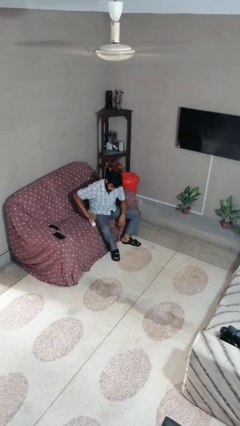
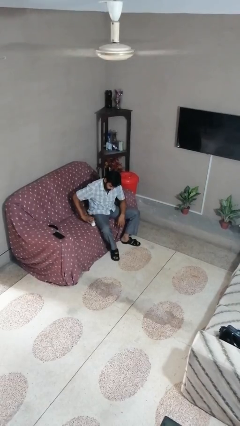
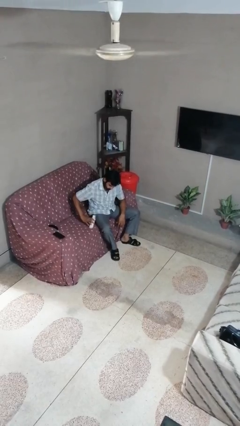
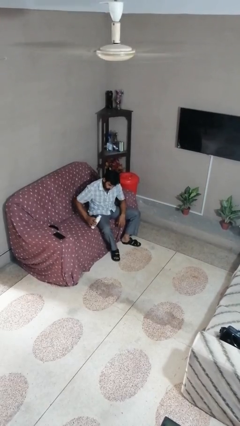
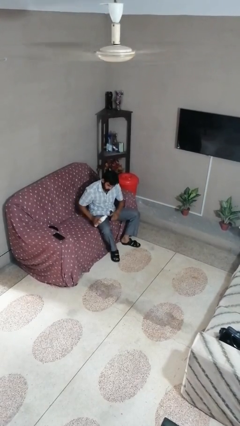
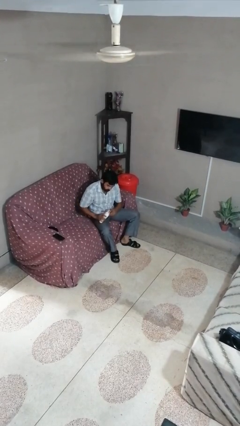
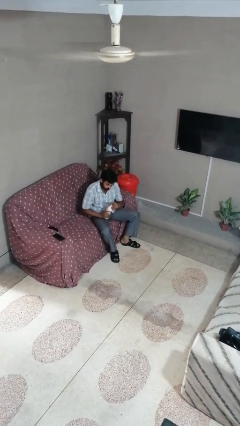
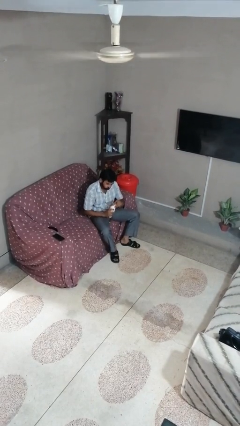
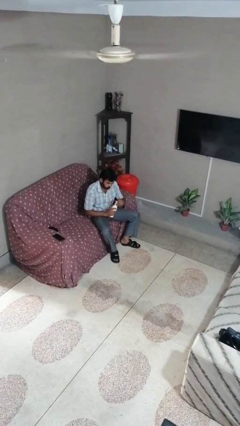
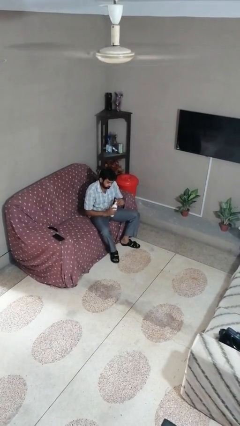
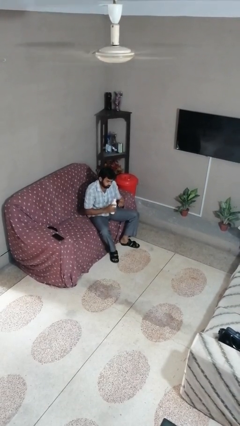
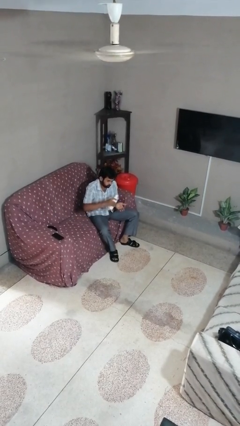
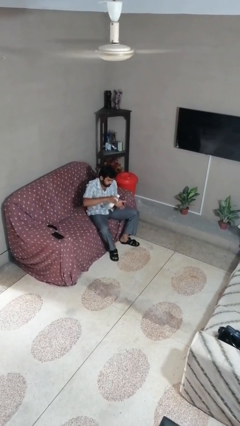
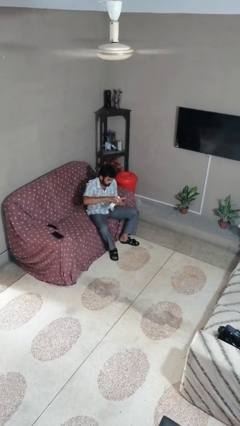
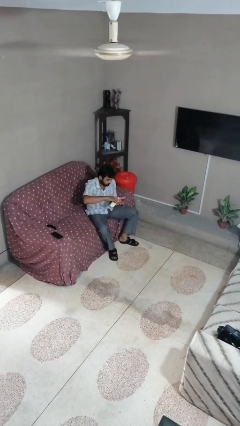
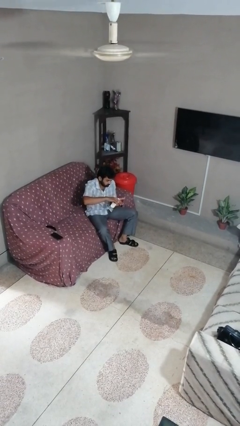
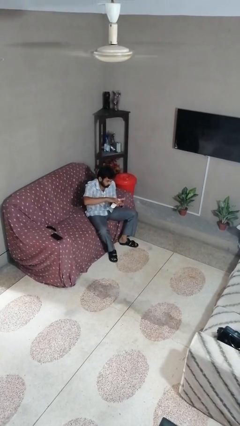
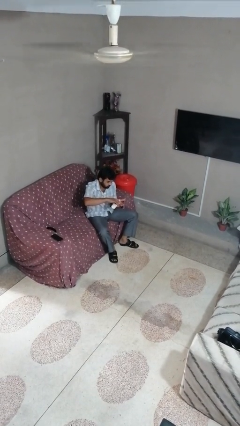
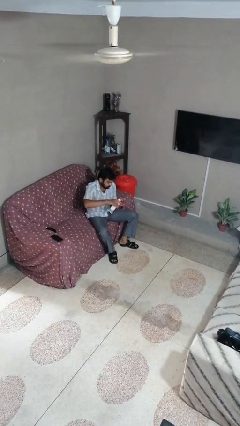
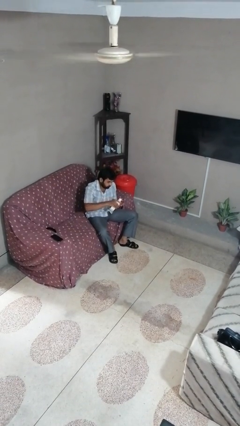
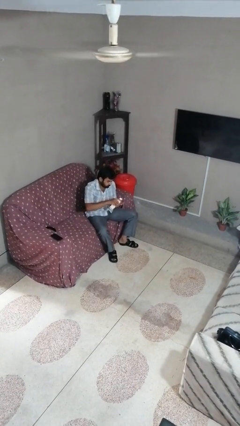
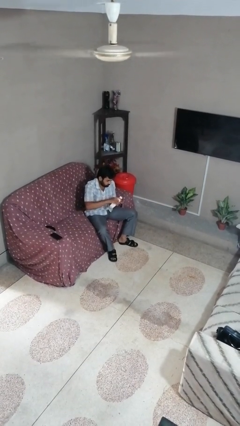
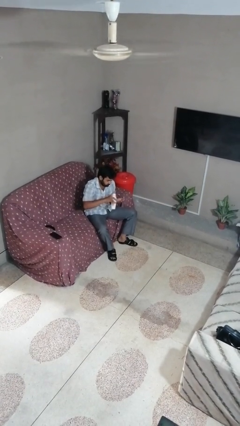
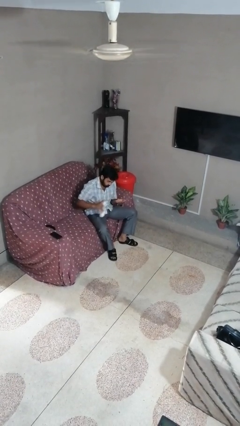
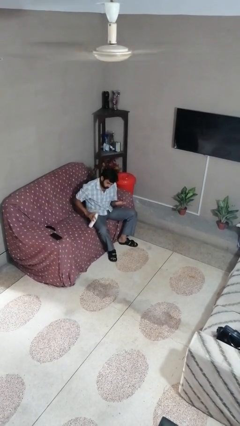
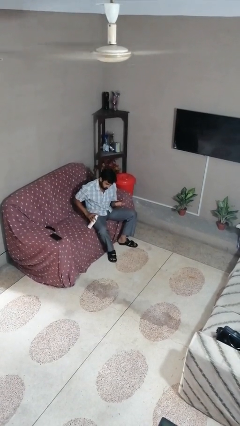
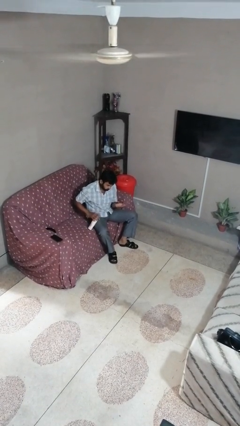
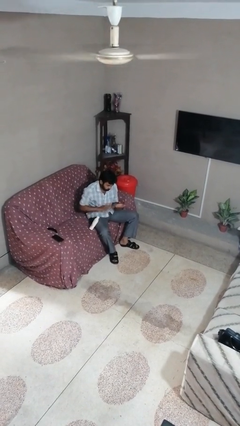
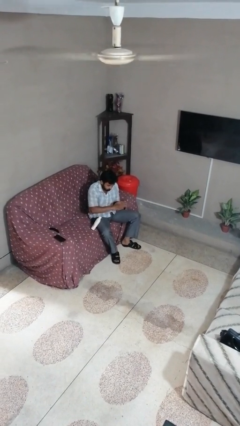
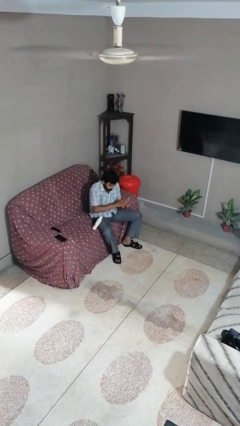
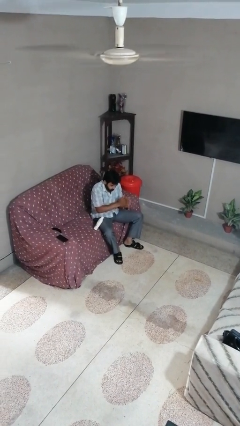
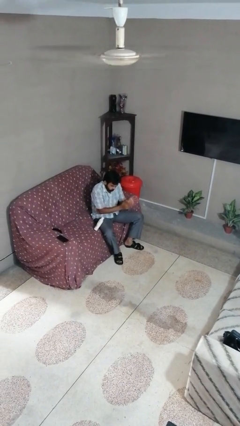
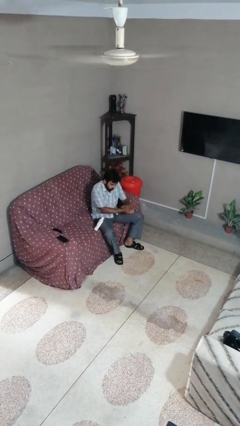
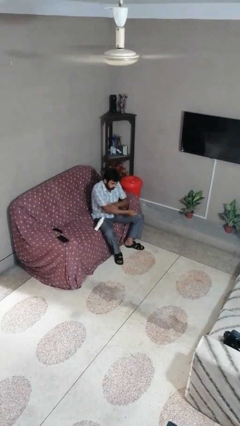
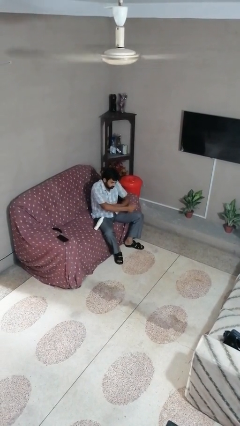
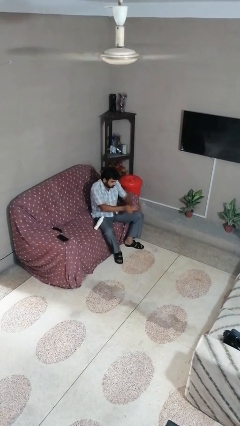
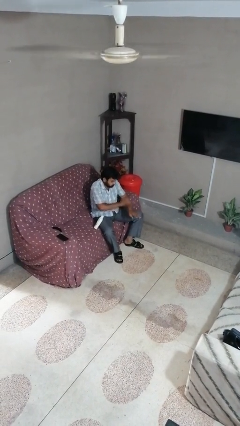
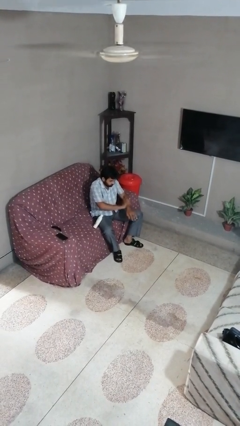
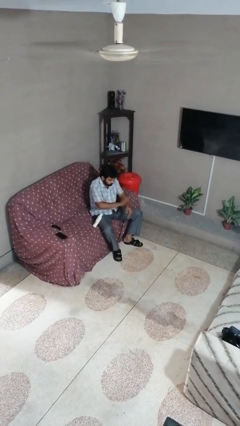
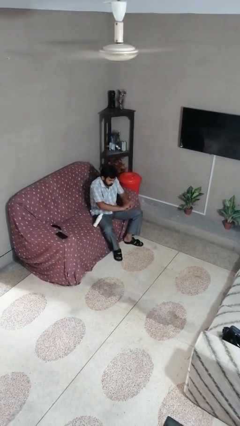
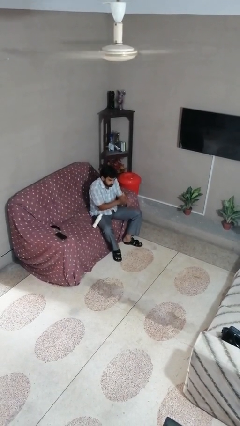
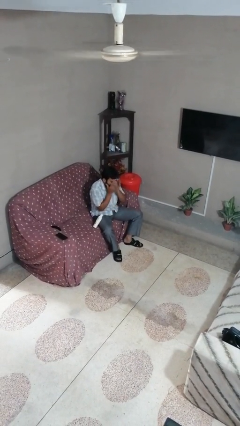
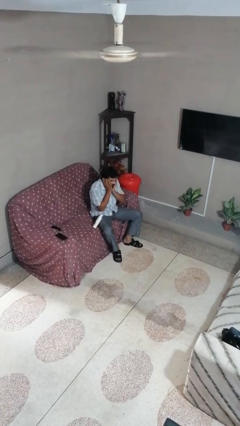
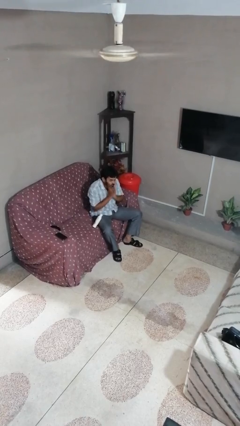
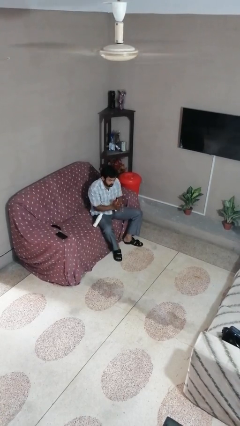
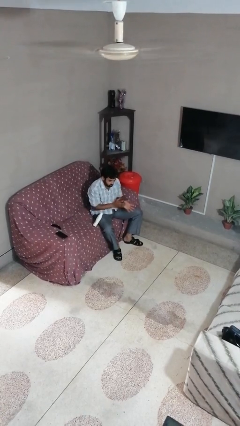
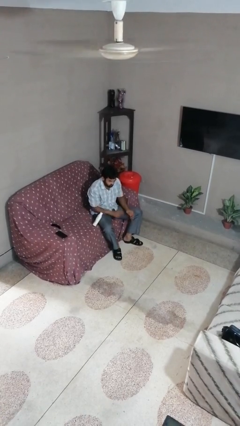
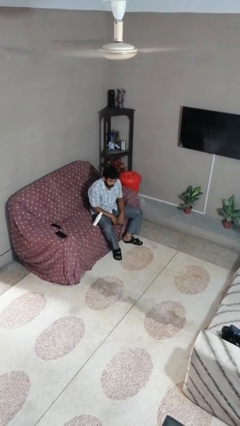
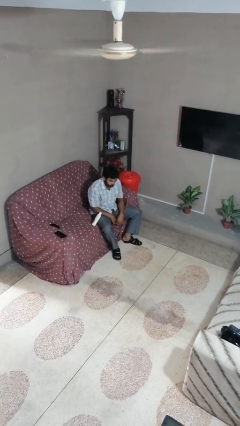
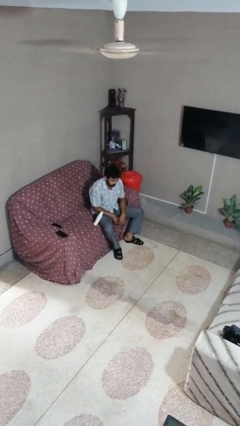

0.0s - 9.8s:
person applies sunscreen

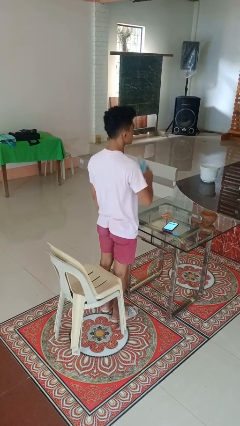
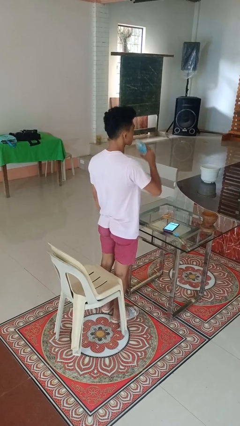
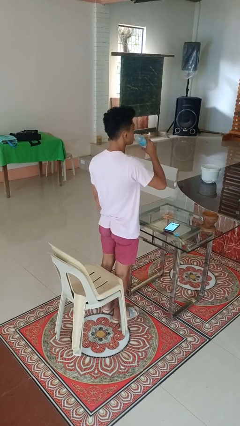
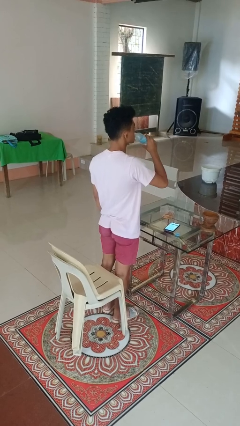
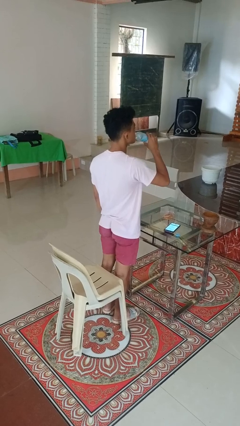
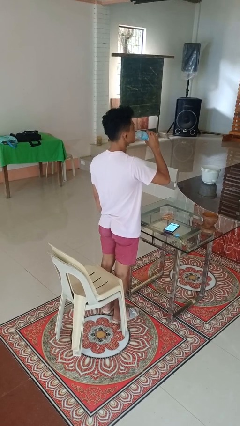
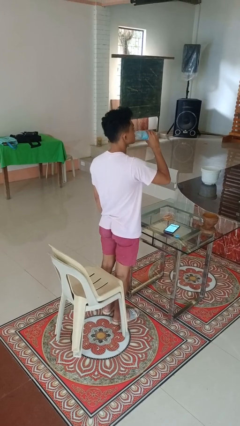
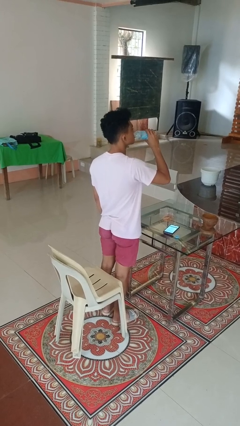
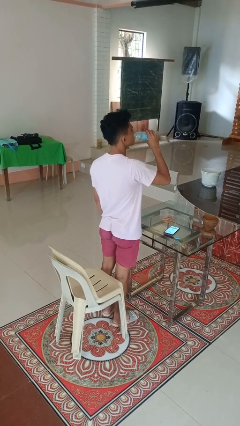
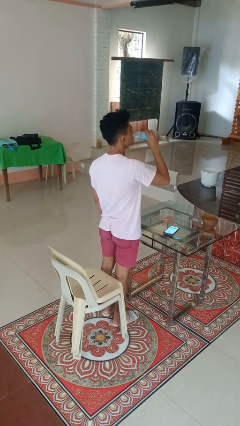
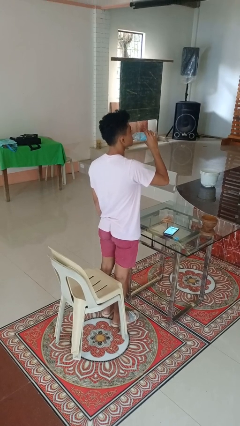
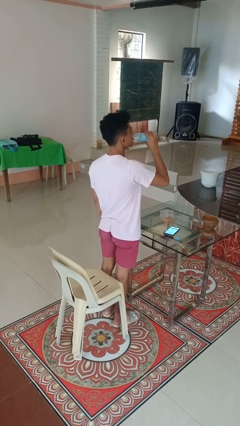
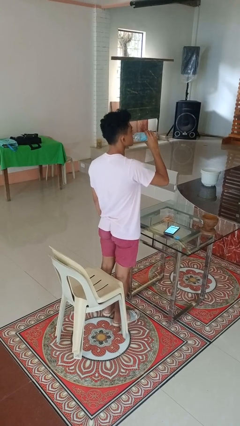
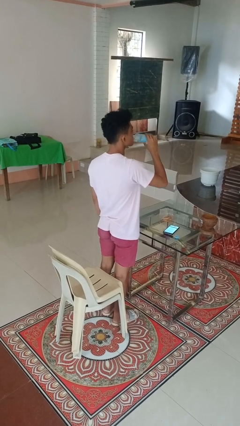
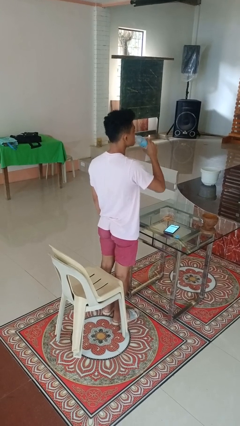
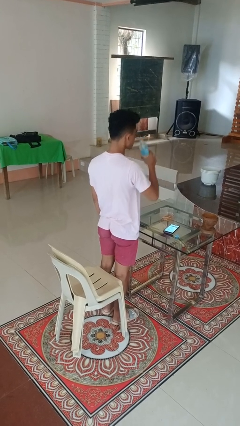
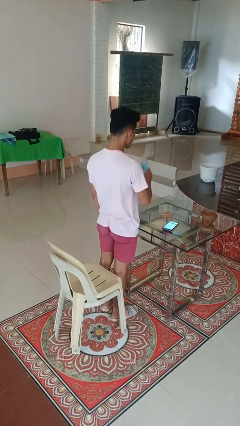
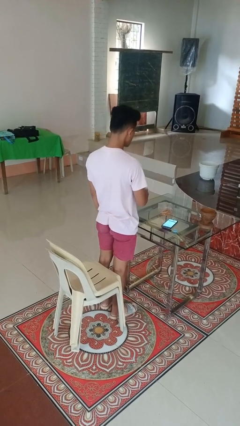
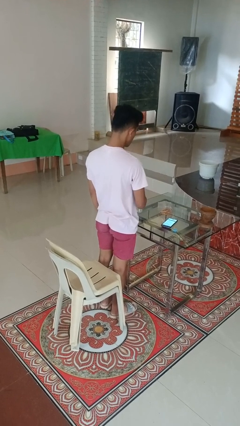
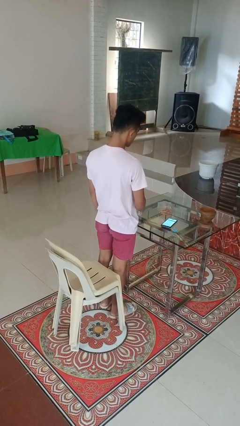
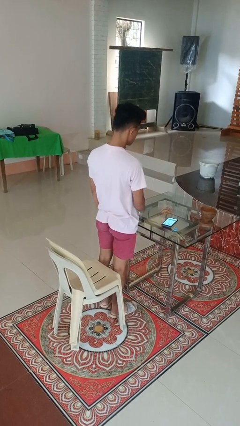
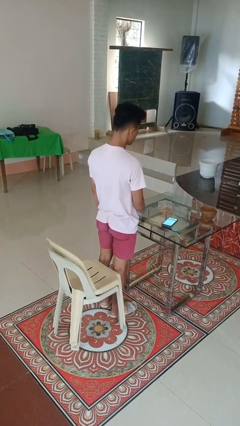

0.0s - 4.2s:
person drinks from bottle

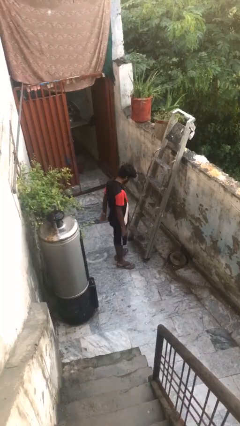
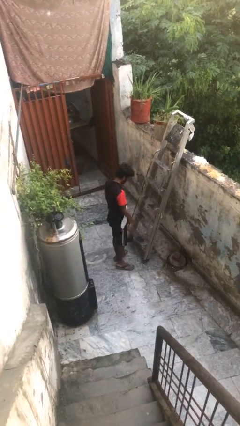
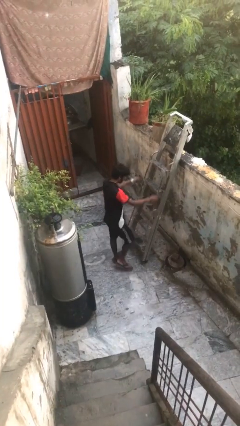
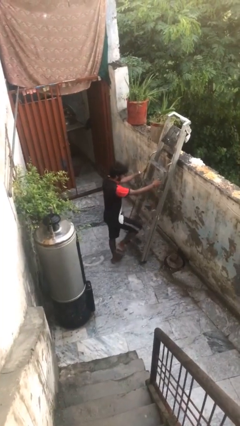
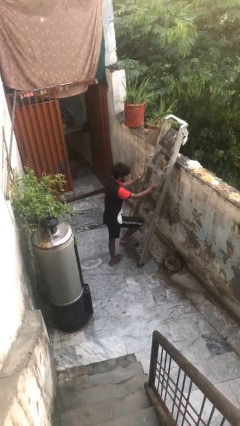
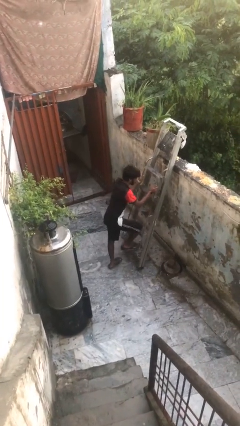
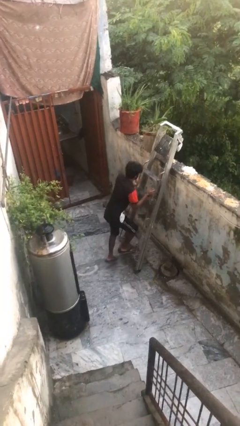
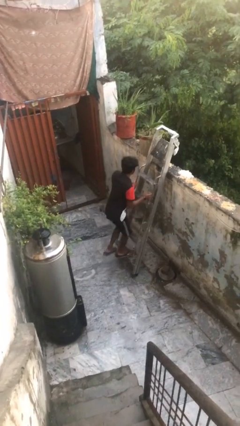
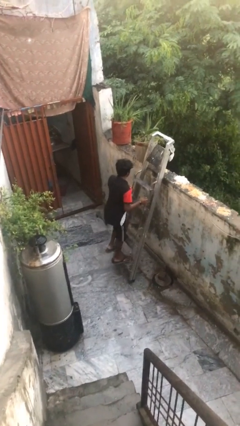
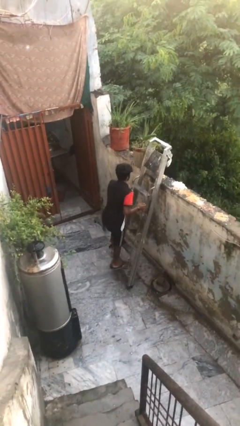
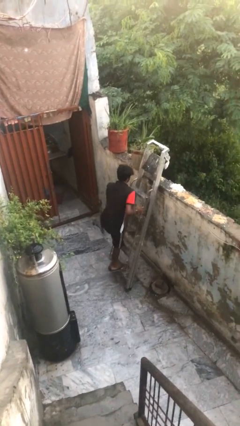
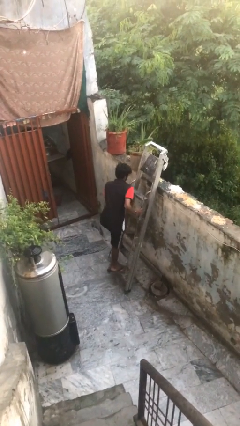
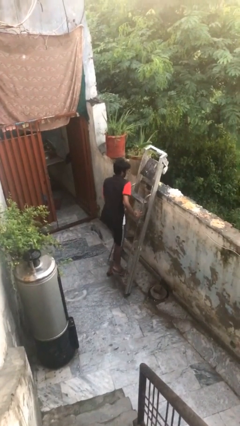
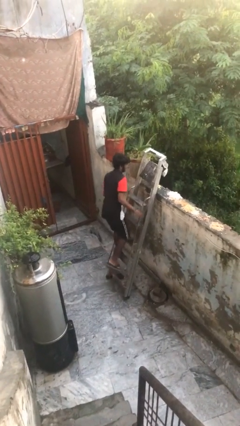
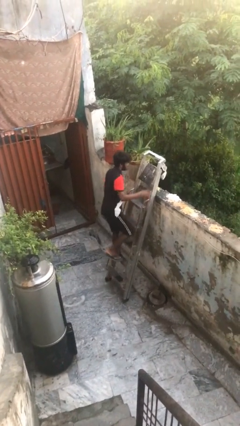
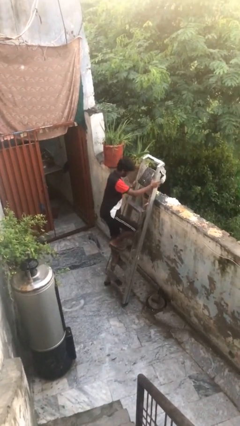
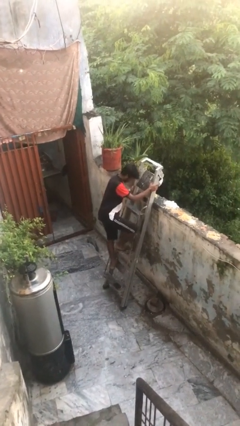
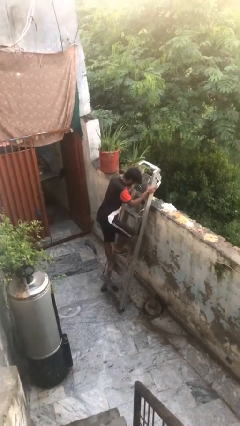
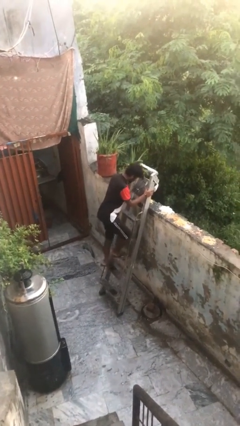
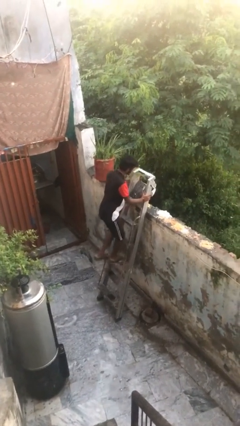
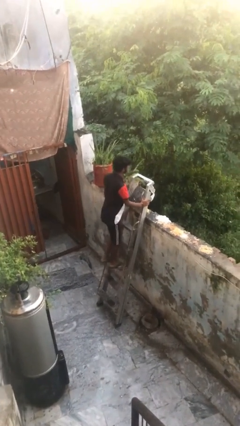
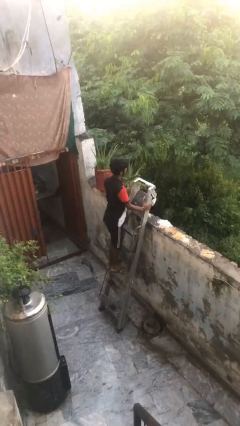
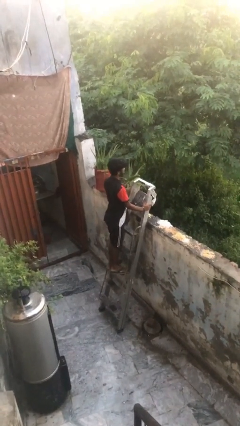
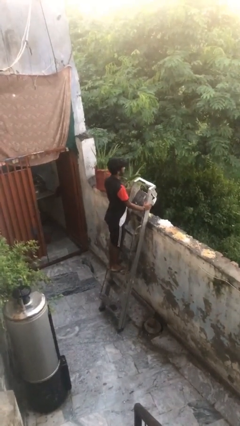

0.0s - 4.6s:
person climbs up ladder
